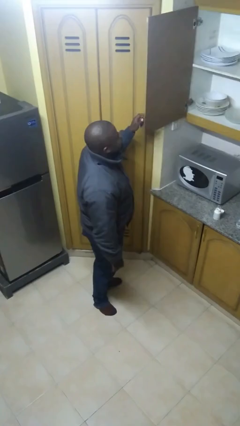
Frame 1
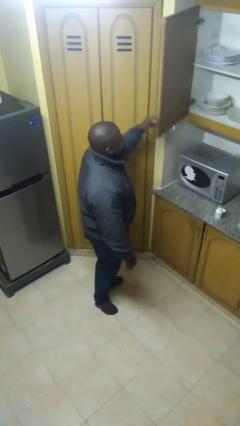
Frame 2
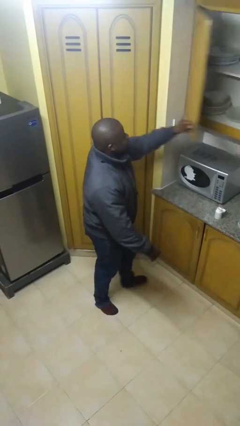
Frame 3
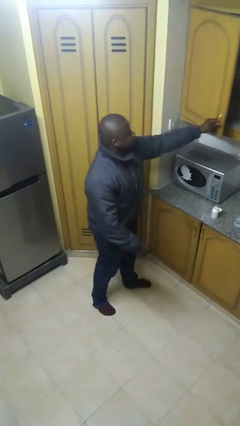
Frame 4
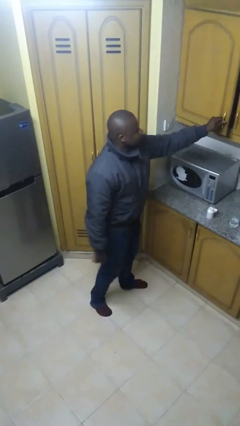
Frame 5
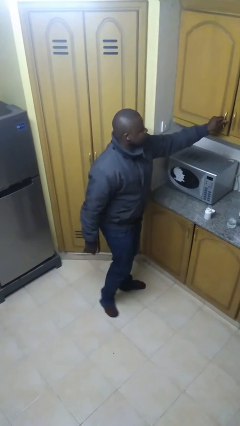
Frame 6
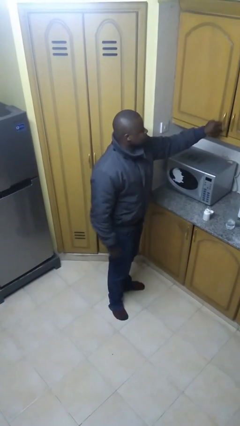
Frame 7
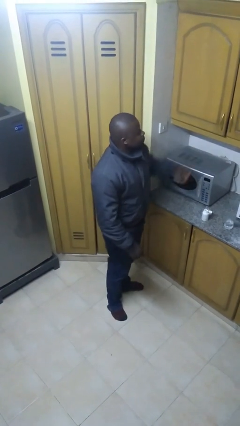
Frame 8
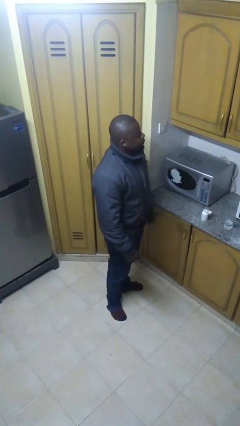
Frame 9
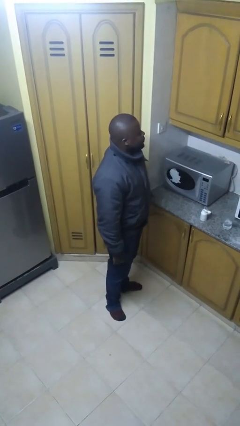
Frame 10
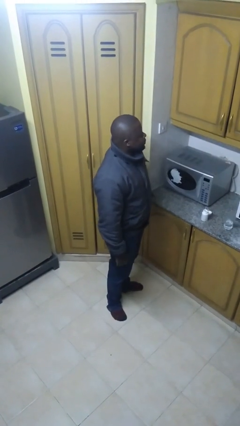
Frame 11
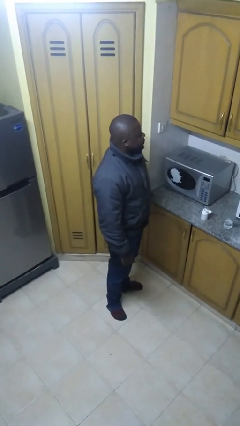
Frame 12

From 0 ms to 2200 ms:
person closes cabinet

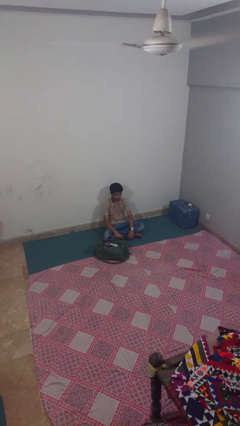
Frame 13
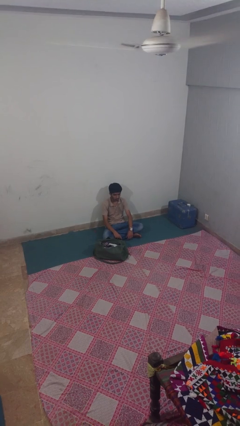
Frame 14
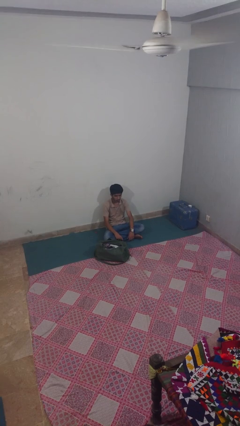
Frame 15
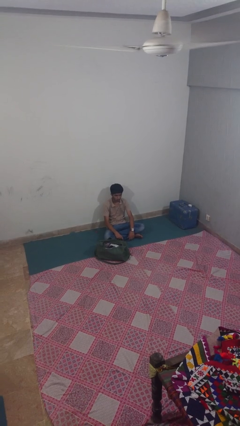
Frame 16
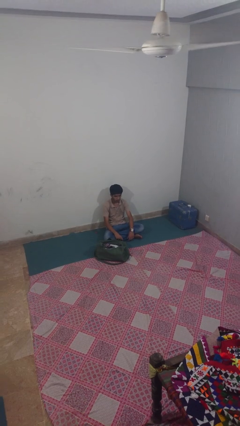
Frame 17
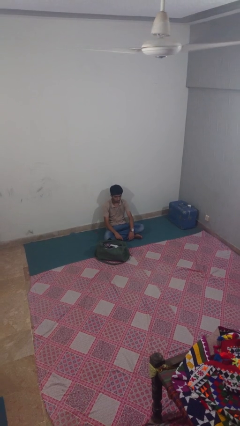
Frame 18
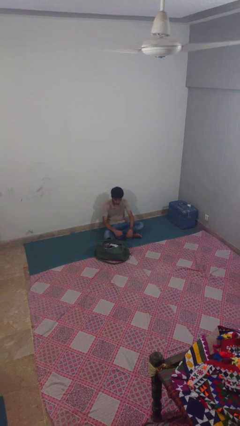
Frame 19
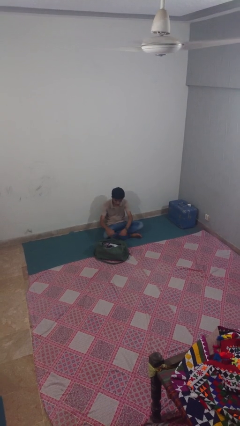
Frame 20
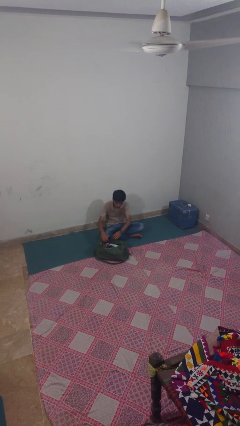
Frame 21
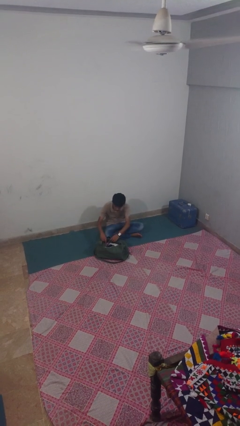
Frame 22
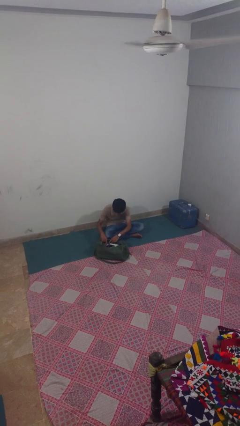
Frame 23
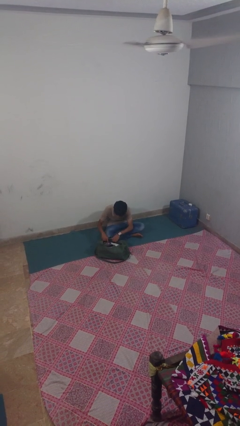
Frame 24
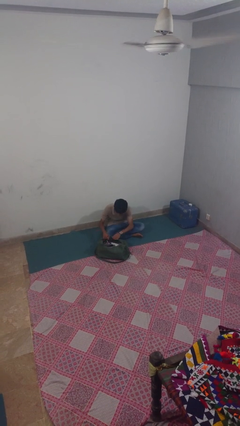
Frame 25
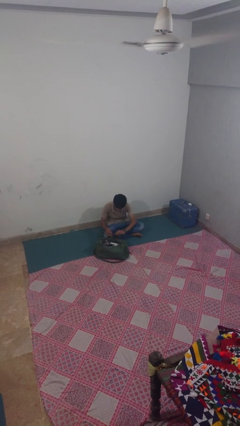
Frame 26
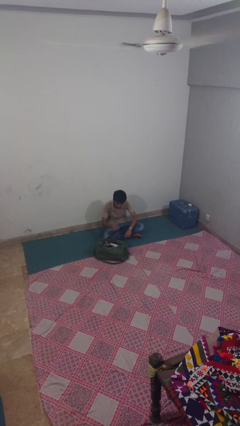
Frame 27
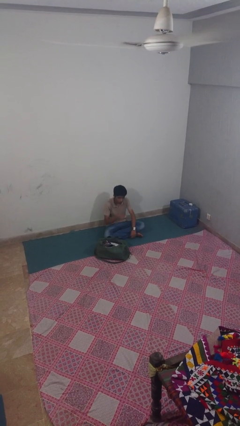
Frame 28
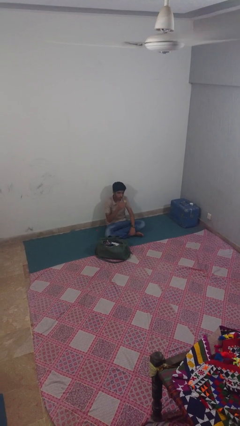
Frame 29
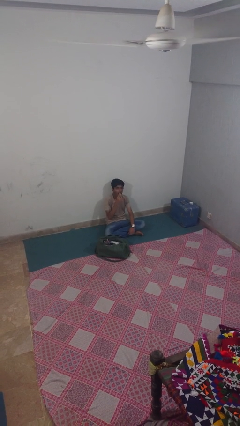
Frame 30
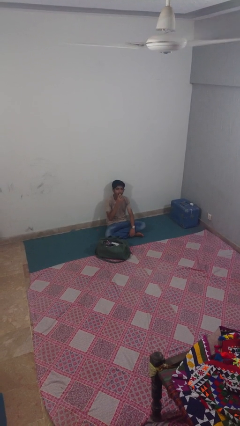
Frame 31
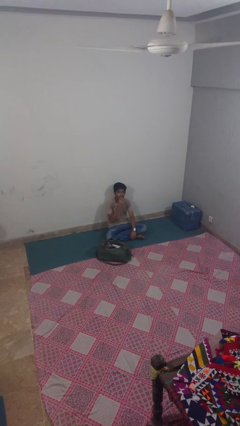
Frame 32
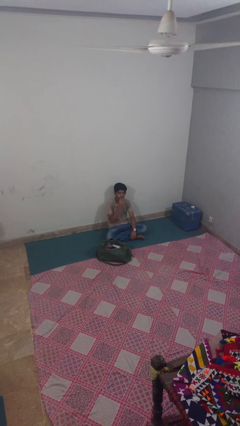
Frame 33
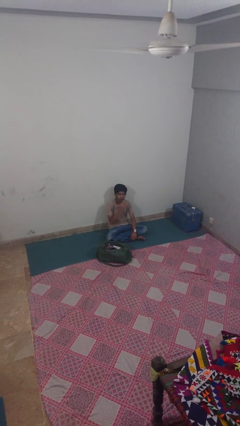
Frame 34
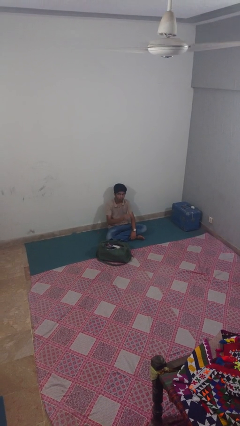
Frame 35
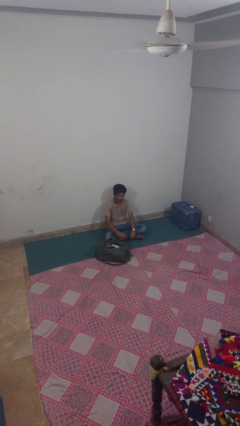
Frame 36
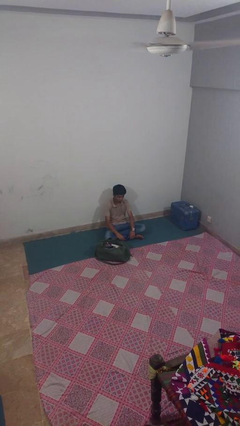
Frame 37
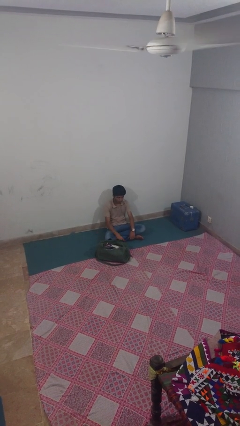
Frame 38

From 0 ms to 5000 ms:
person eats snack from bag

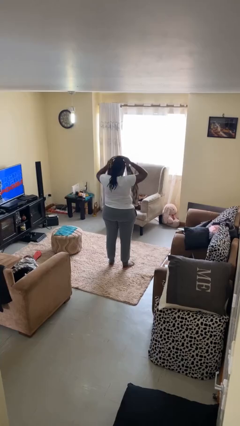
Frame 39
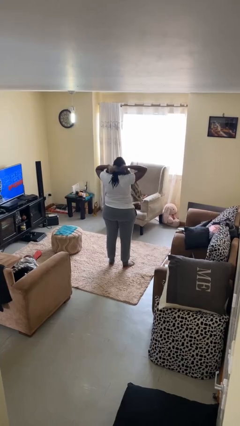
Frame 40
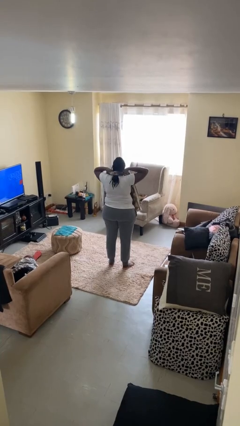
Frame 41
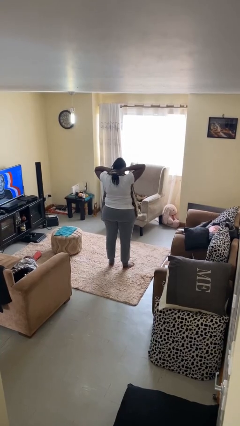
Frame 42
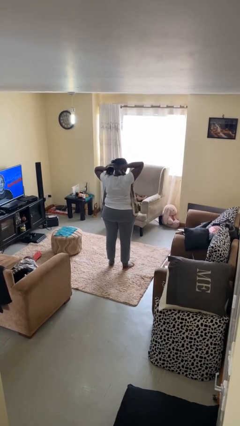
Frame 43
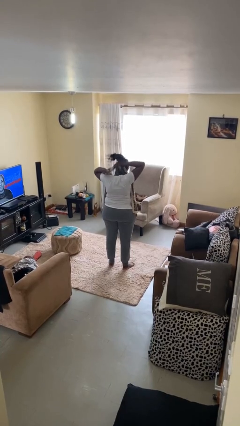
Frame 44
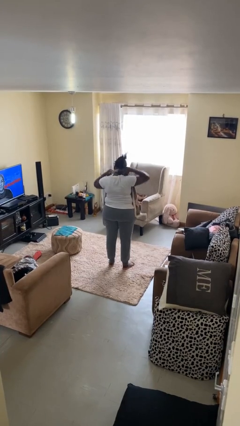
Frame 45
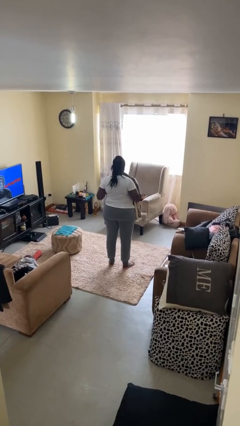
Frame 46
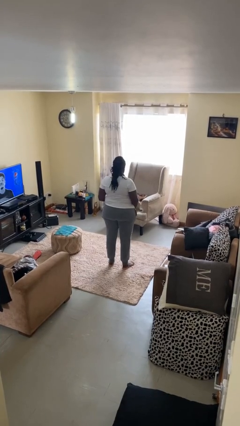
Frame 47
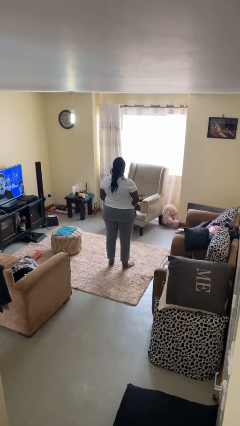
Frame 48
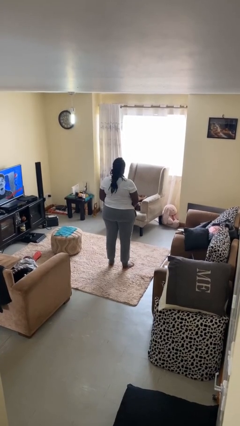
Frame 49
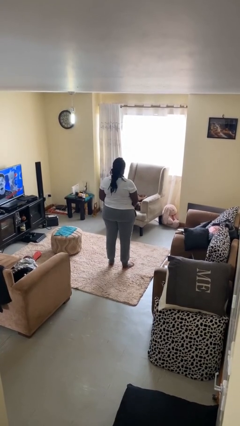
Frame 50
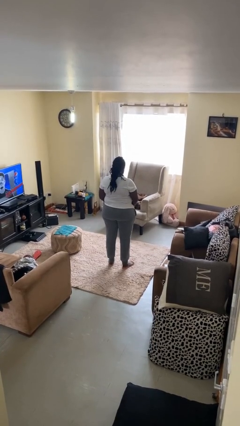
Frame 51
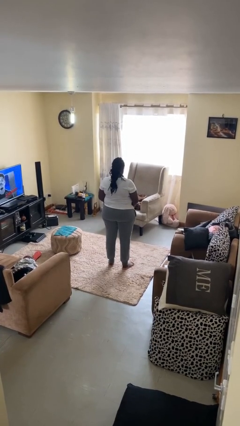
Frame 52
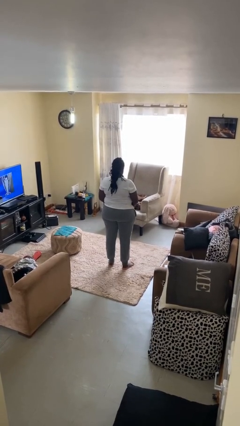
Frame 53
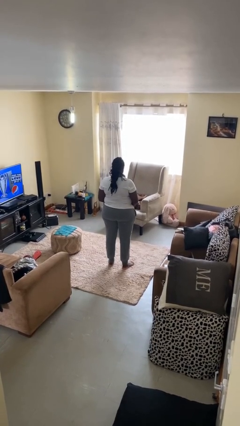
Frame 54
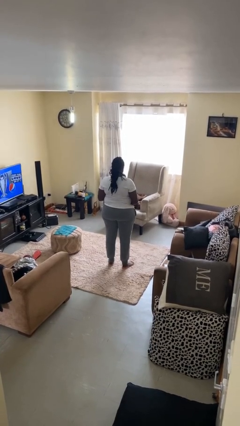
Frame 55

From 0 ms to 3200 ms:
person puts on scarf

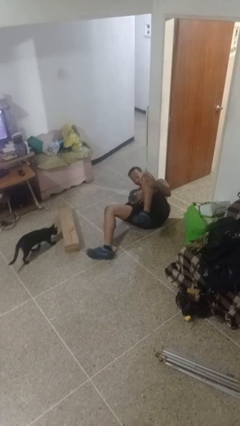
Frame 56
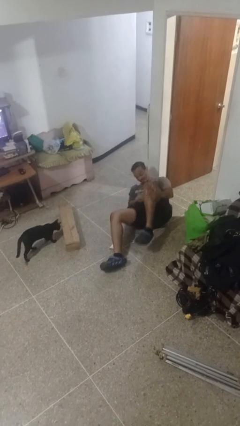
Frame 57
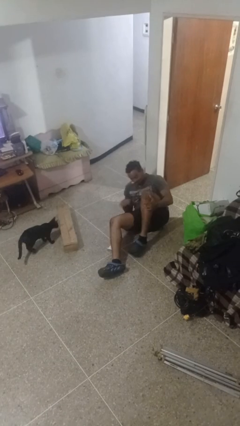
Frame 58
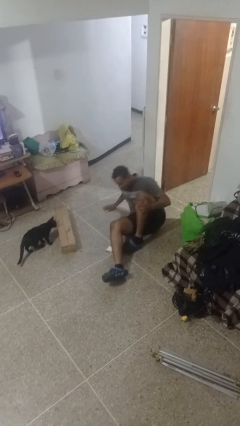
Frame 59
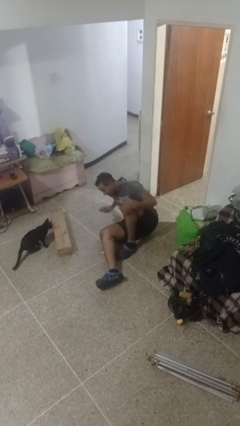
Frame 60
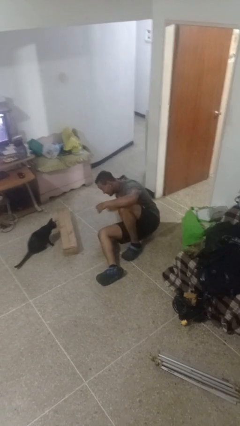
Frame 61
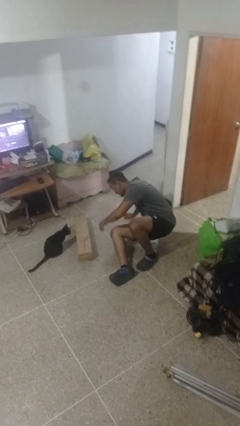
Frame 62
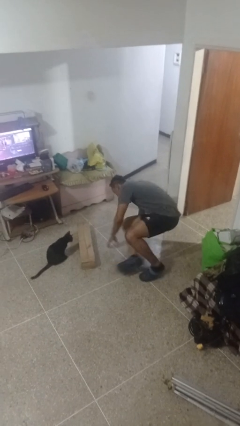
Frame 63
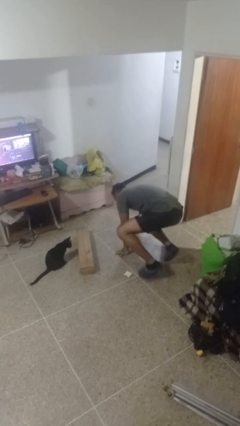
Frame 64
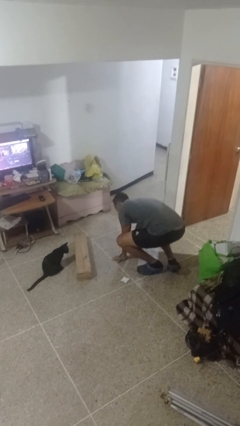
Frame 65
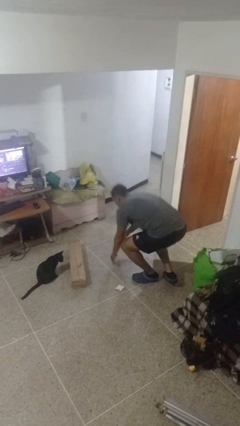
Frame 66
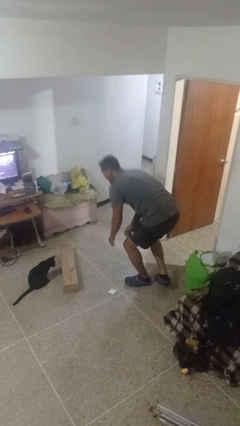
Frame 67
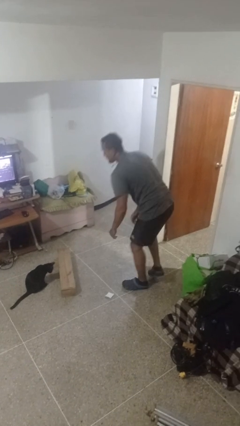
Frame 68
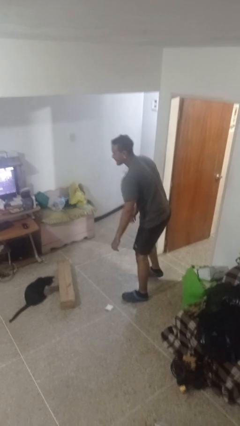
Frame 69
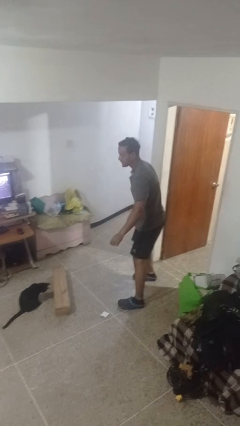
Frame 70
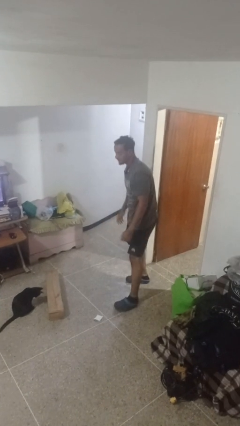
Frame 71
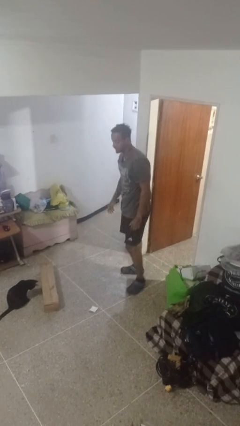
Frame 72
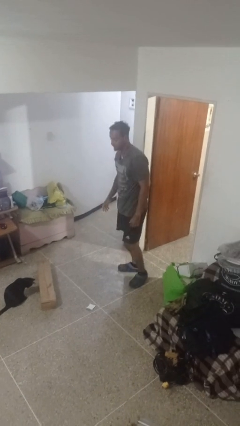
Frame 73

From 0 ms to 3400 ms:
person stands up from floor

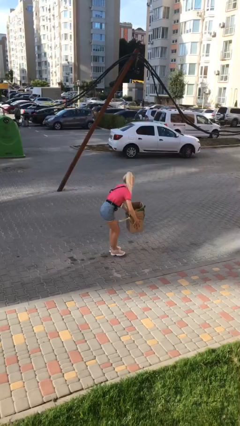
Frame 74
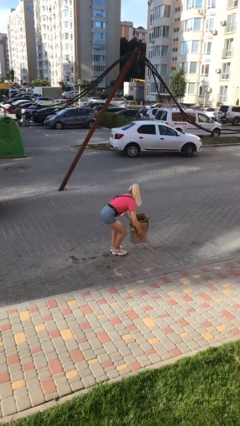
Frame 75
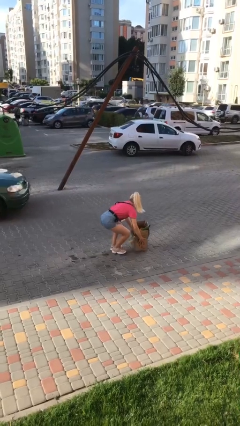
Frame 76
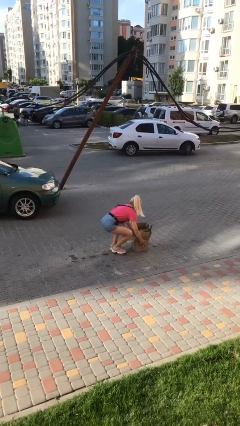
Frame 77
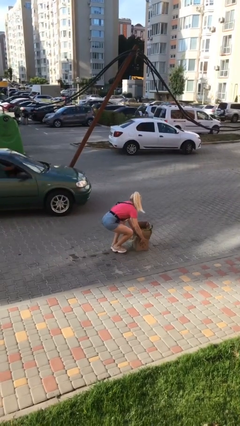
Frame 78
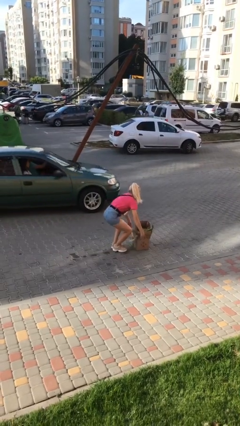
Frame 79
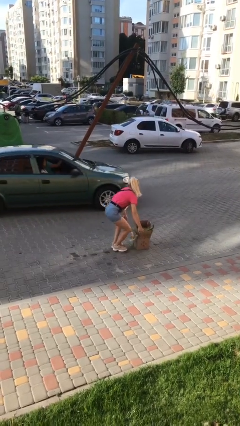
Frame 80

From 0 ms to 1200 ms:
person puts down object on floor

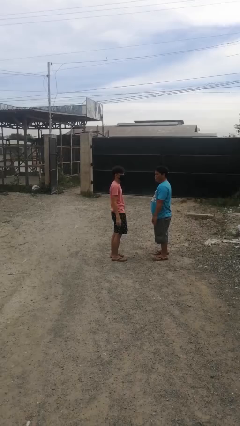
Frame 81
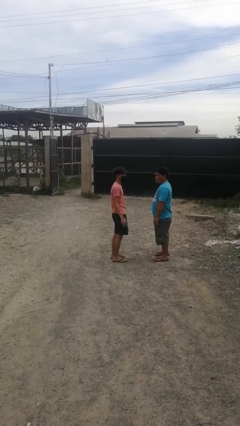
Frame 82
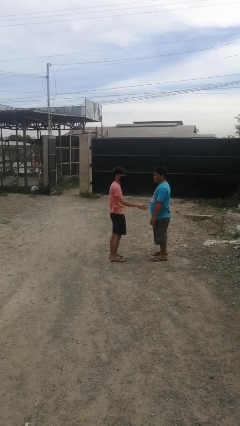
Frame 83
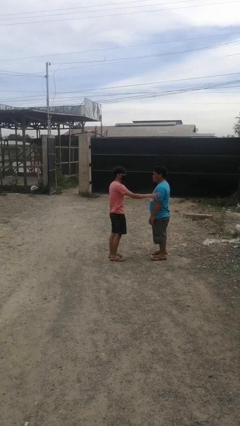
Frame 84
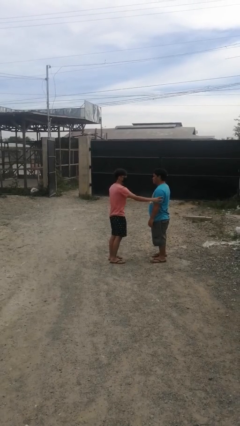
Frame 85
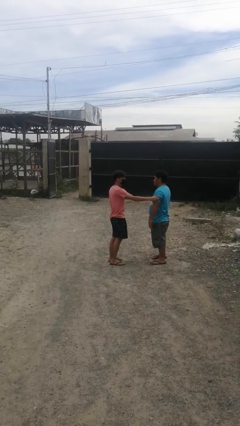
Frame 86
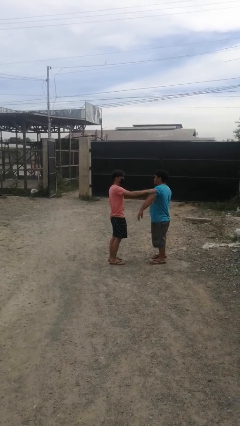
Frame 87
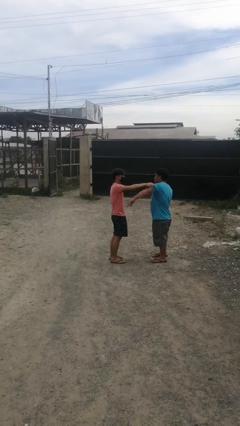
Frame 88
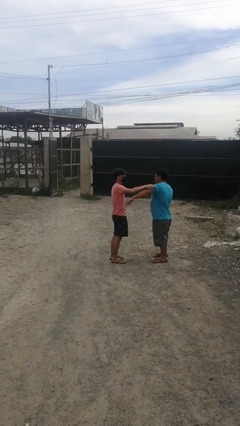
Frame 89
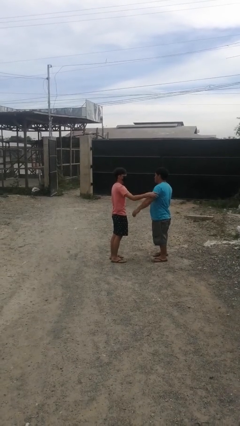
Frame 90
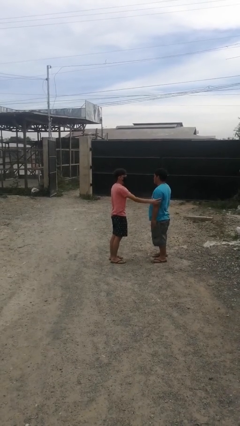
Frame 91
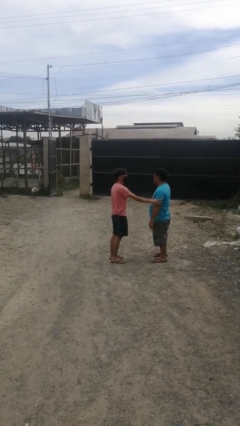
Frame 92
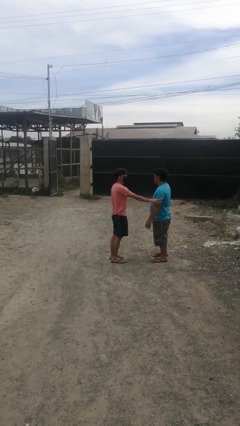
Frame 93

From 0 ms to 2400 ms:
person grabs person by bicep

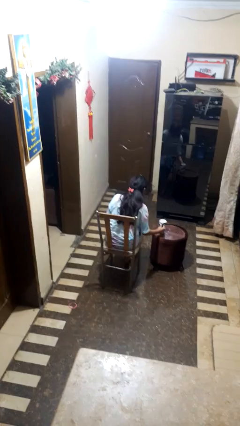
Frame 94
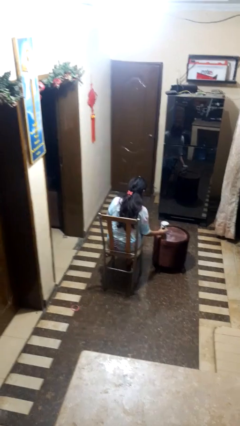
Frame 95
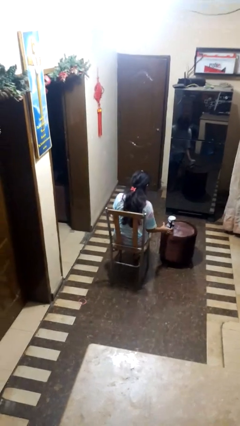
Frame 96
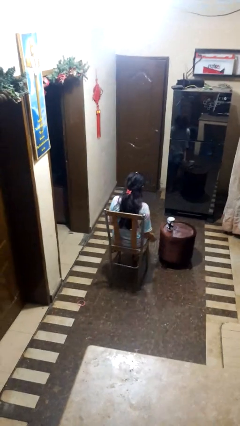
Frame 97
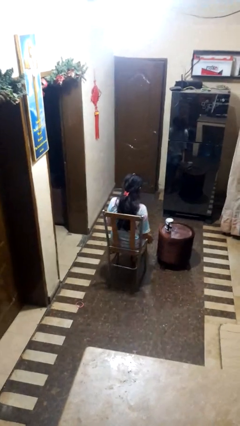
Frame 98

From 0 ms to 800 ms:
person puts down object on table
